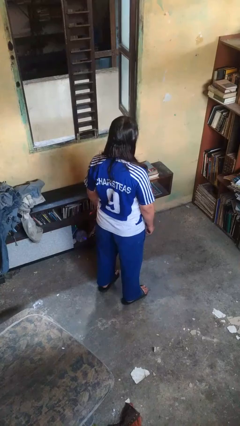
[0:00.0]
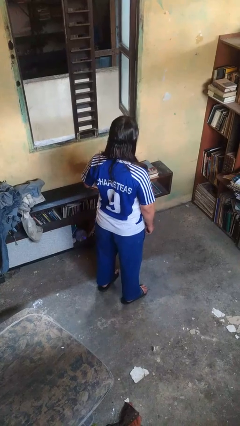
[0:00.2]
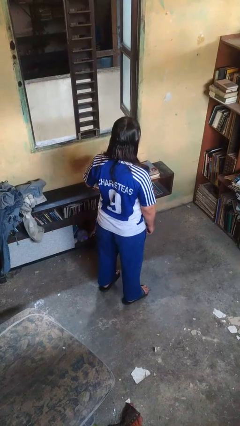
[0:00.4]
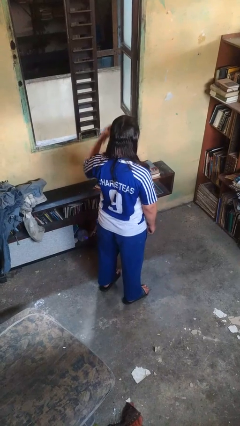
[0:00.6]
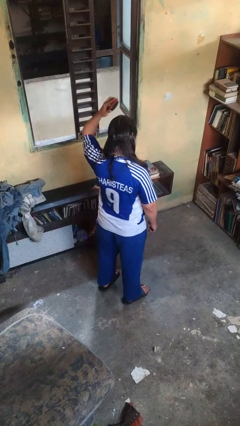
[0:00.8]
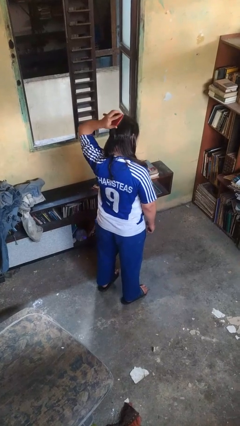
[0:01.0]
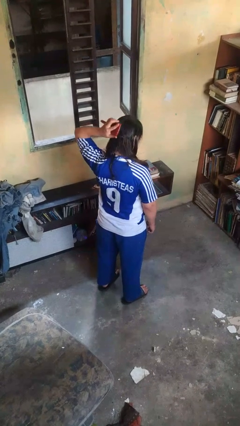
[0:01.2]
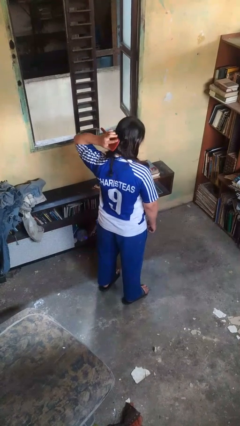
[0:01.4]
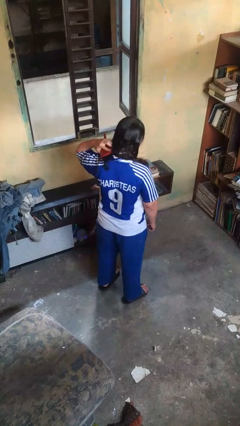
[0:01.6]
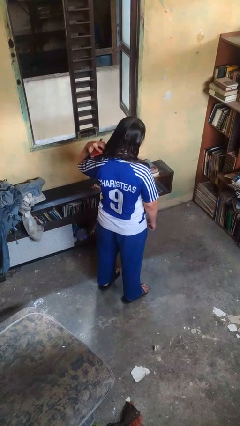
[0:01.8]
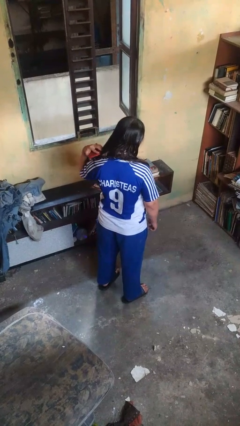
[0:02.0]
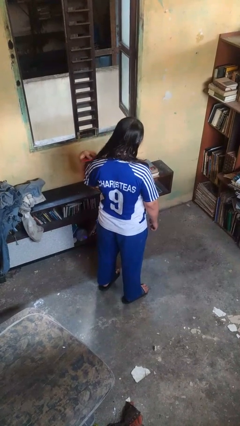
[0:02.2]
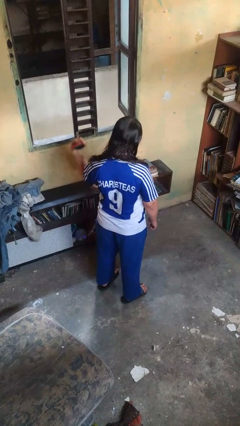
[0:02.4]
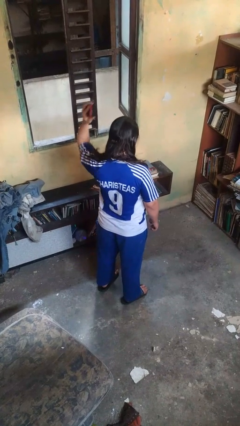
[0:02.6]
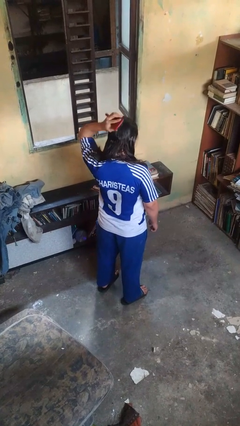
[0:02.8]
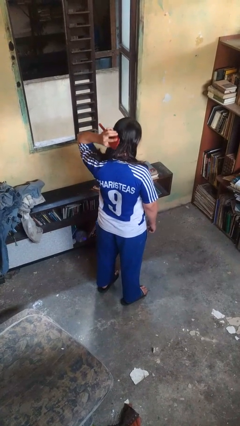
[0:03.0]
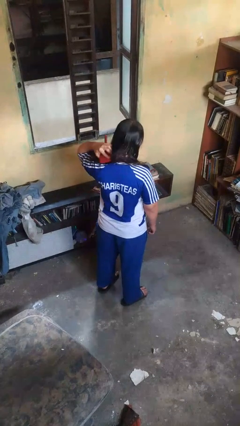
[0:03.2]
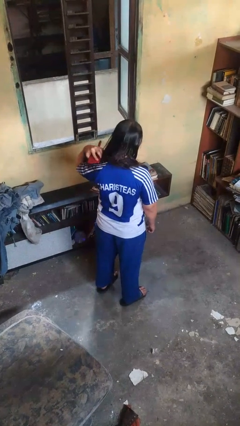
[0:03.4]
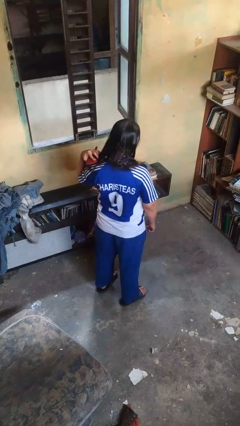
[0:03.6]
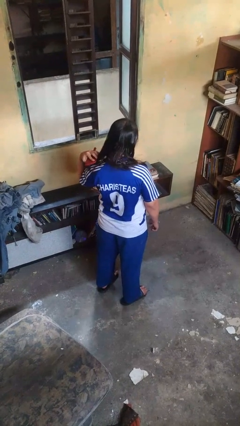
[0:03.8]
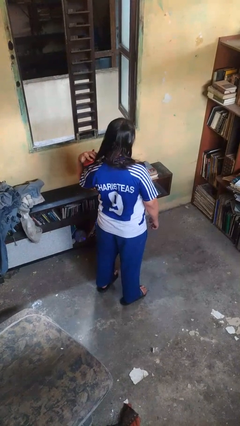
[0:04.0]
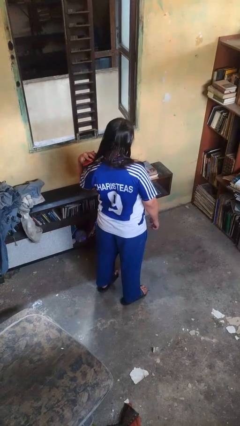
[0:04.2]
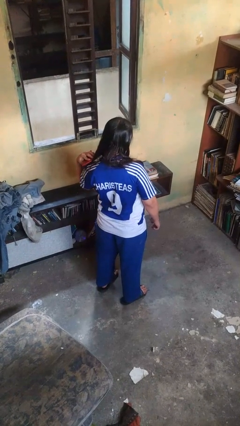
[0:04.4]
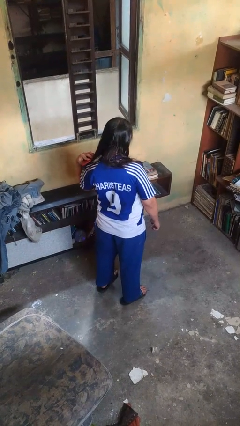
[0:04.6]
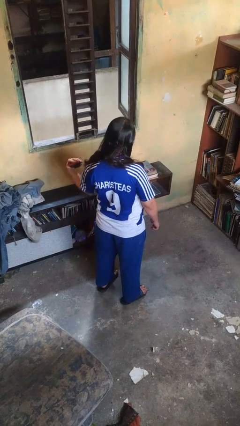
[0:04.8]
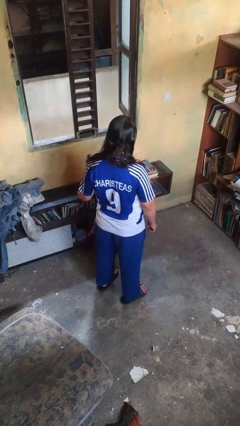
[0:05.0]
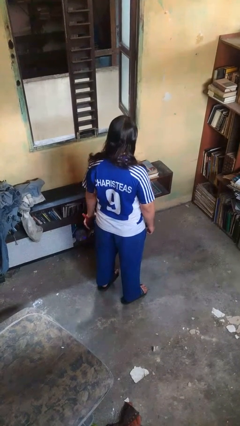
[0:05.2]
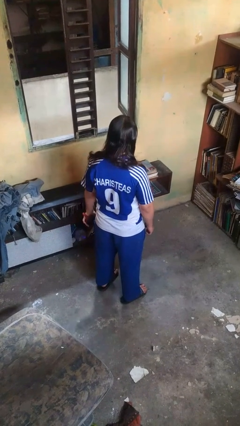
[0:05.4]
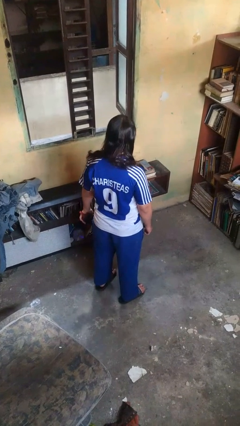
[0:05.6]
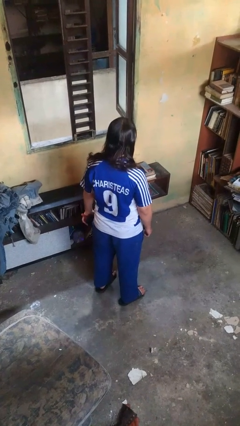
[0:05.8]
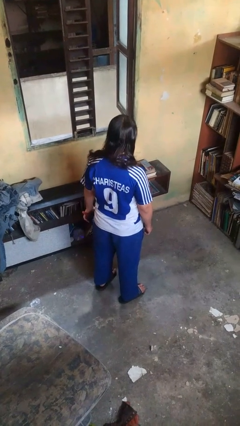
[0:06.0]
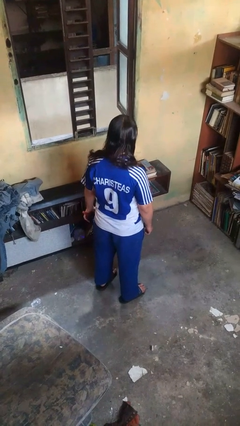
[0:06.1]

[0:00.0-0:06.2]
person brushes hair

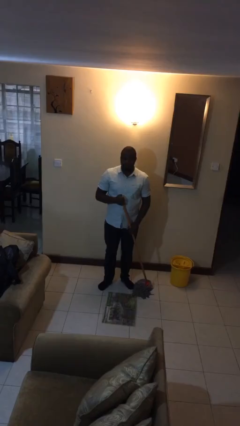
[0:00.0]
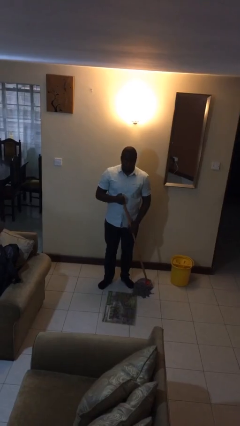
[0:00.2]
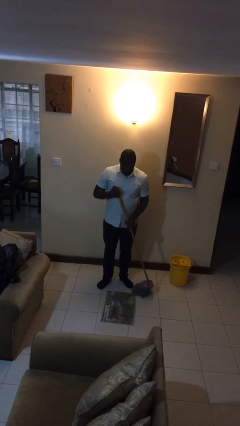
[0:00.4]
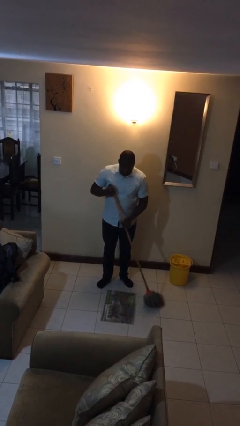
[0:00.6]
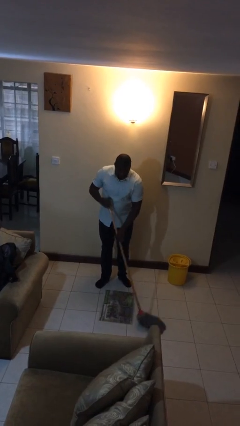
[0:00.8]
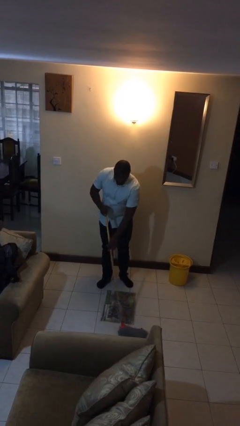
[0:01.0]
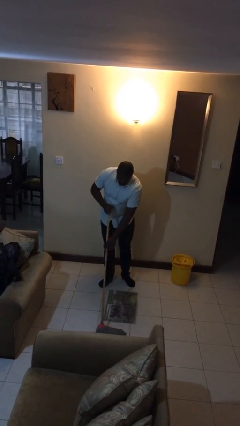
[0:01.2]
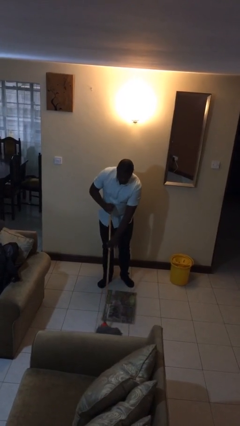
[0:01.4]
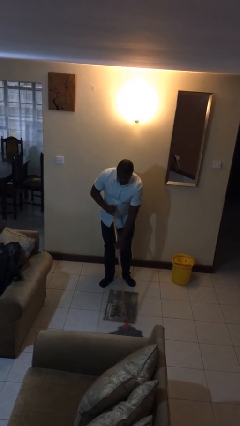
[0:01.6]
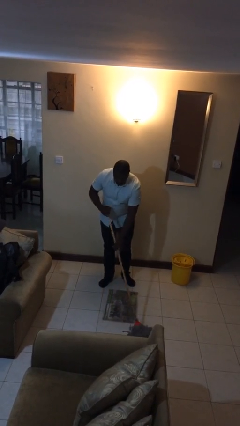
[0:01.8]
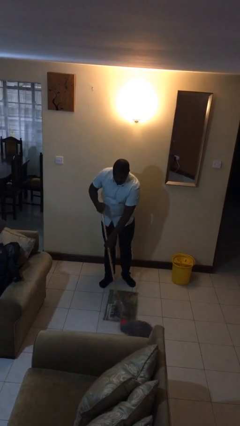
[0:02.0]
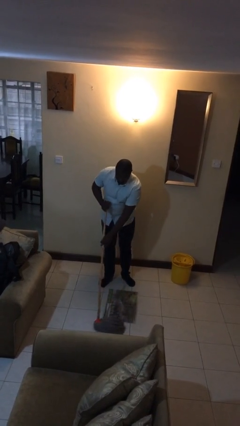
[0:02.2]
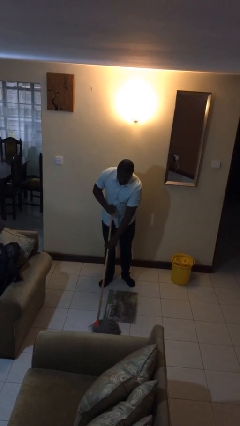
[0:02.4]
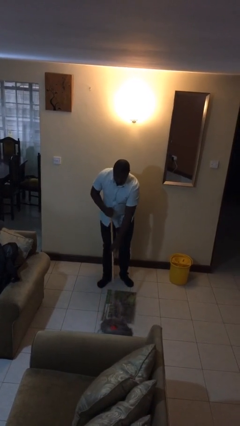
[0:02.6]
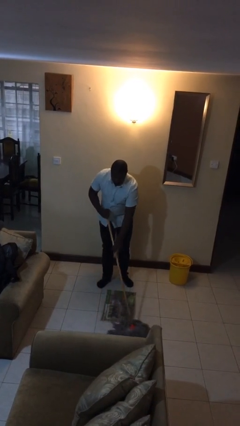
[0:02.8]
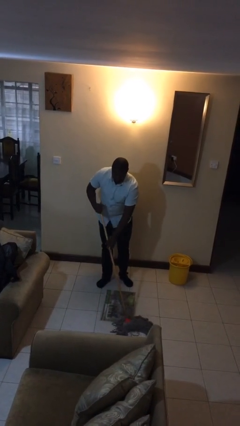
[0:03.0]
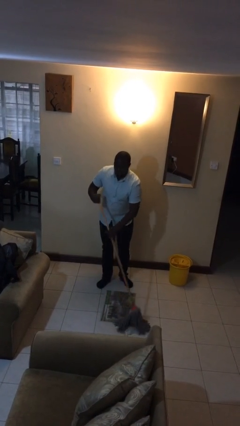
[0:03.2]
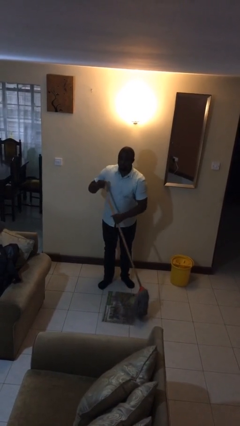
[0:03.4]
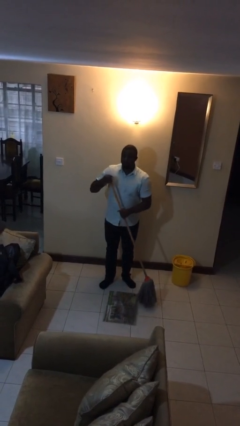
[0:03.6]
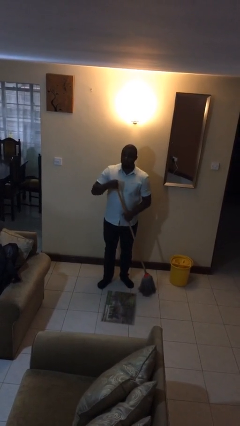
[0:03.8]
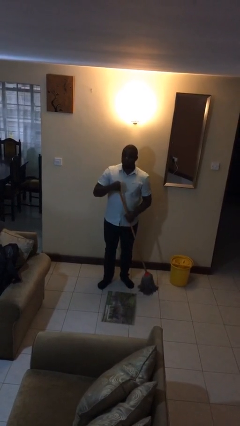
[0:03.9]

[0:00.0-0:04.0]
person mops

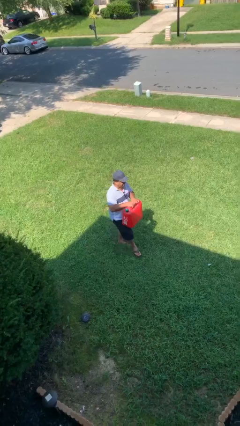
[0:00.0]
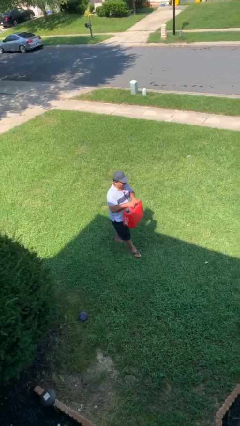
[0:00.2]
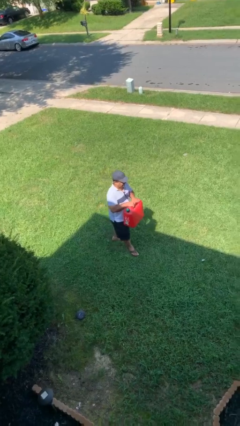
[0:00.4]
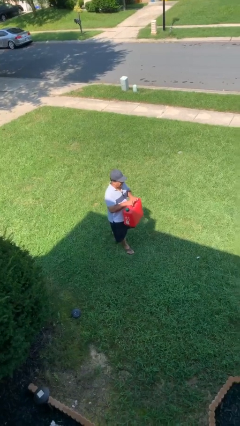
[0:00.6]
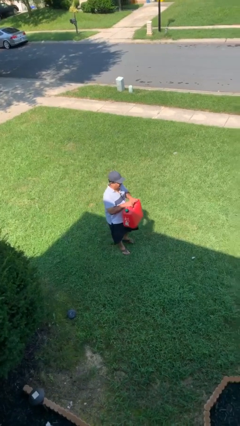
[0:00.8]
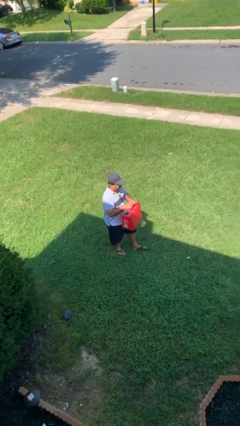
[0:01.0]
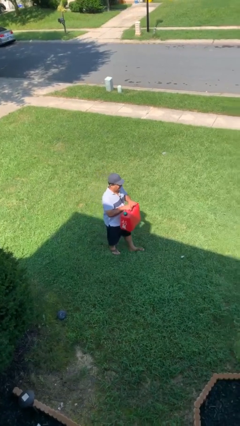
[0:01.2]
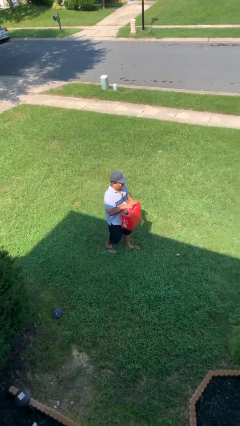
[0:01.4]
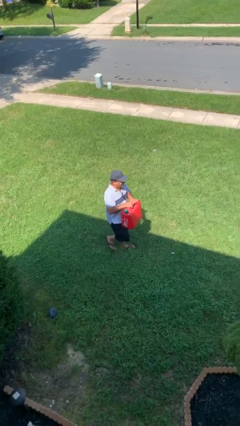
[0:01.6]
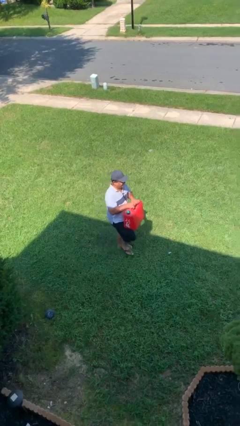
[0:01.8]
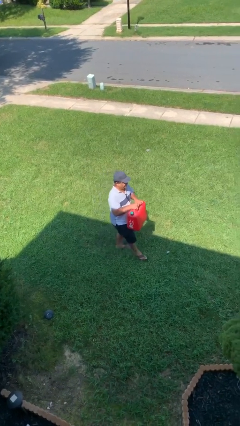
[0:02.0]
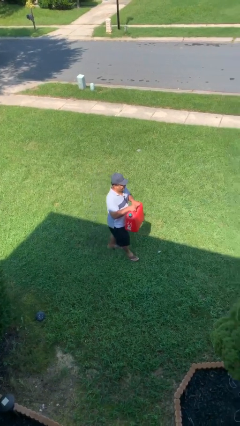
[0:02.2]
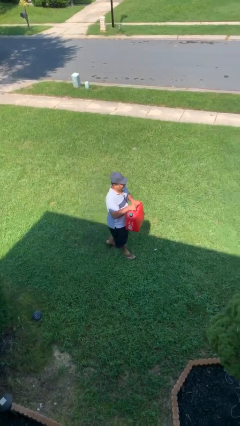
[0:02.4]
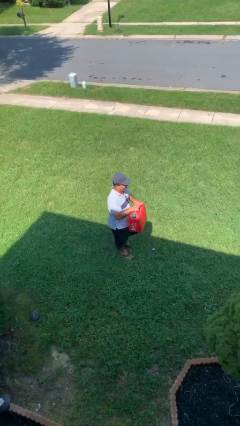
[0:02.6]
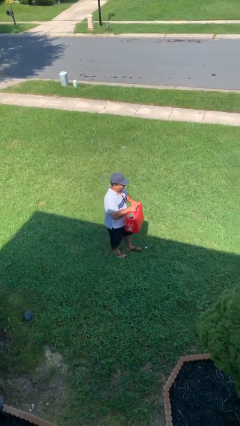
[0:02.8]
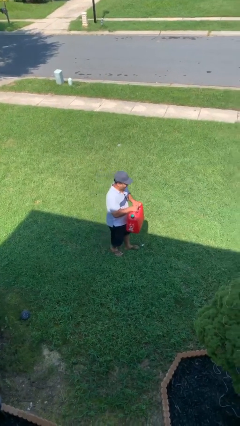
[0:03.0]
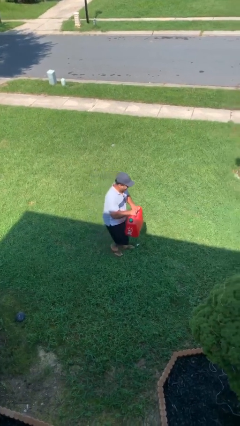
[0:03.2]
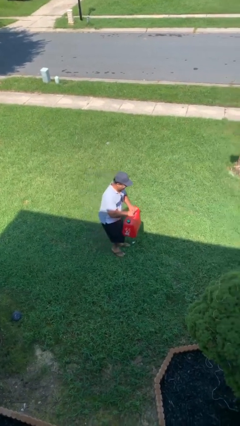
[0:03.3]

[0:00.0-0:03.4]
person carries heavy object

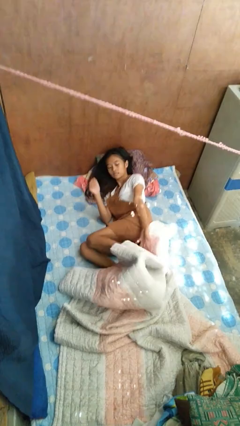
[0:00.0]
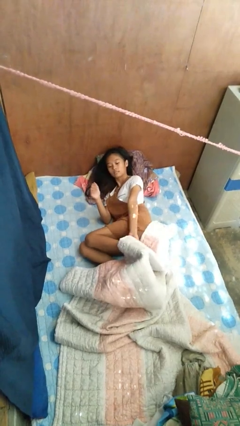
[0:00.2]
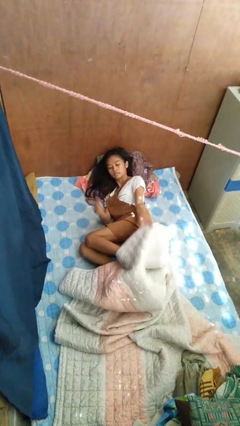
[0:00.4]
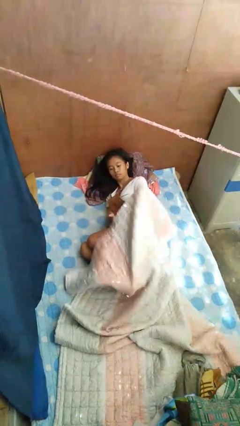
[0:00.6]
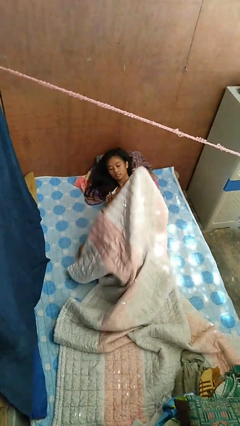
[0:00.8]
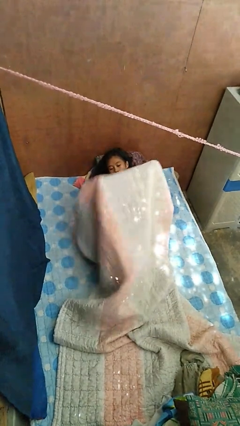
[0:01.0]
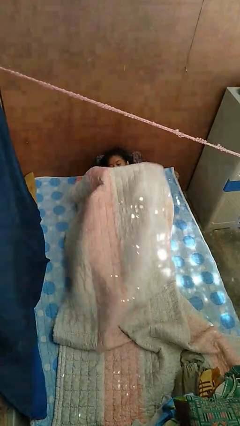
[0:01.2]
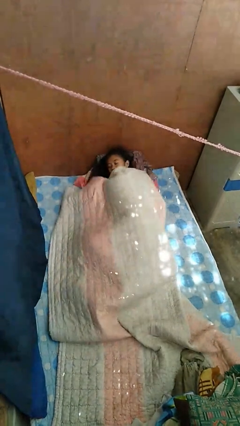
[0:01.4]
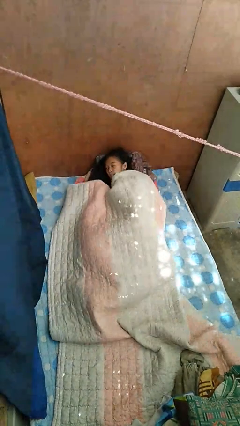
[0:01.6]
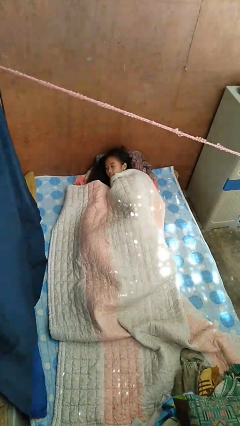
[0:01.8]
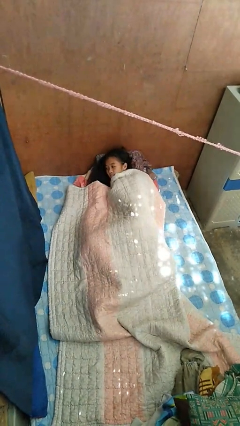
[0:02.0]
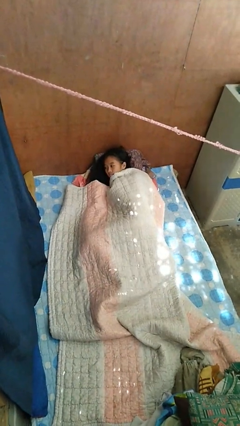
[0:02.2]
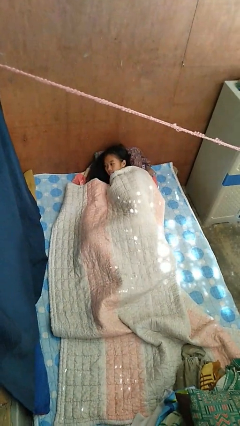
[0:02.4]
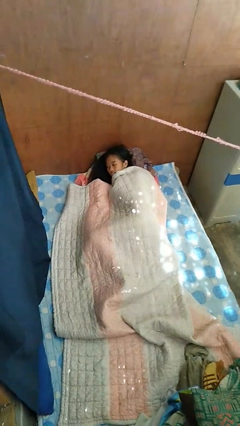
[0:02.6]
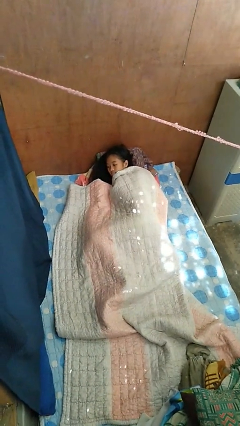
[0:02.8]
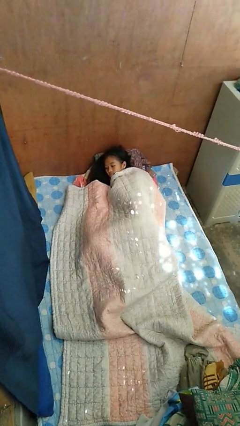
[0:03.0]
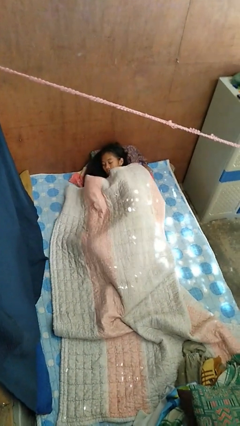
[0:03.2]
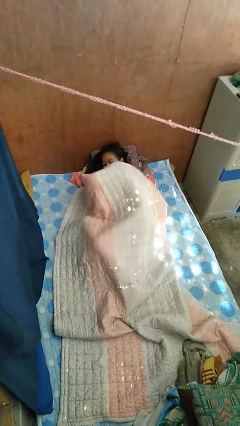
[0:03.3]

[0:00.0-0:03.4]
person covers with bedsheets

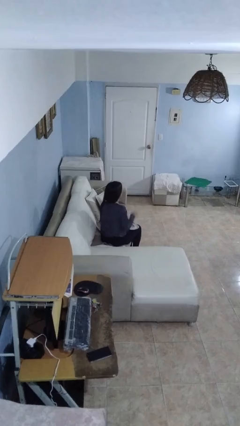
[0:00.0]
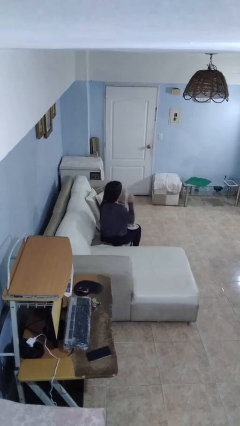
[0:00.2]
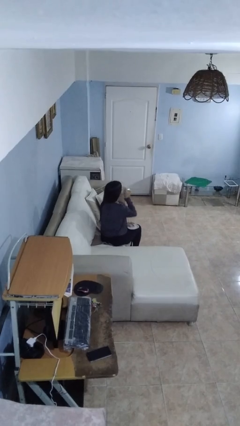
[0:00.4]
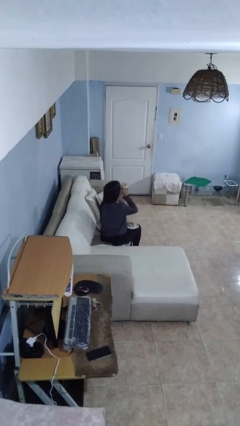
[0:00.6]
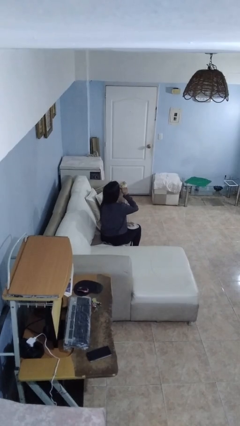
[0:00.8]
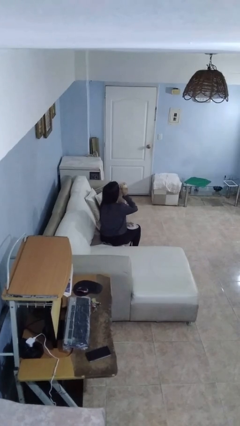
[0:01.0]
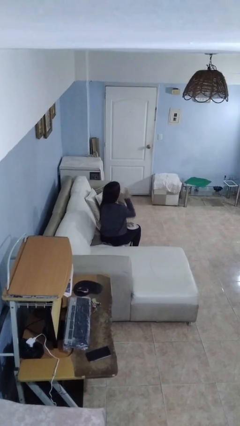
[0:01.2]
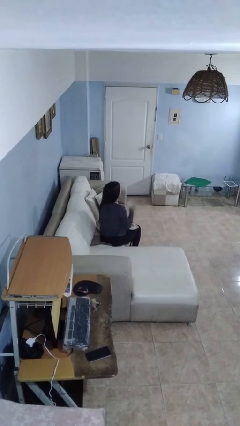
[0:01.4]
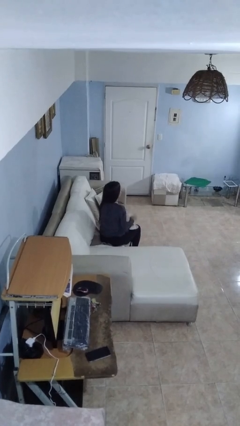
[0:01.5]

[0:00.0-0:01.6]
person drinks from mug
